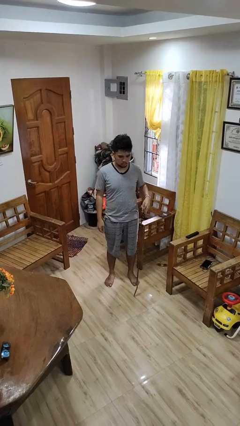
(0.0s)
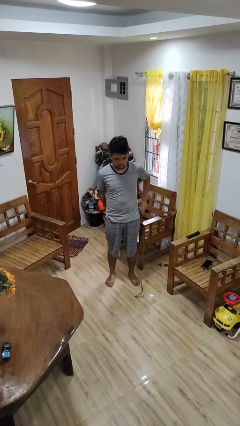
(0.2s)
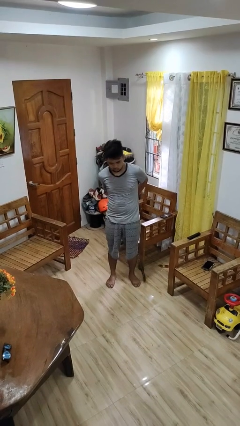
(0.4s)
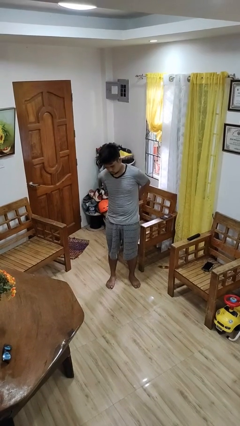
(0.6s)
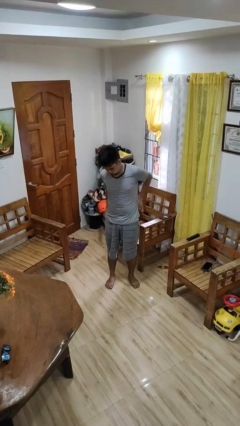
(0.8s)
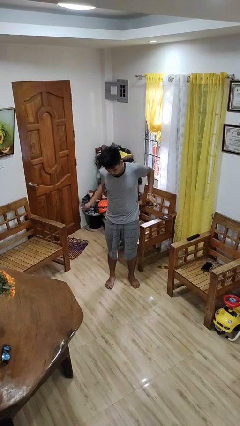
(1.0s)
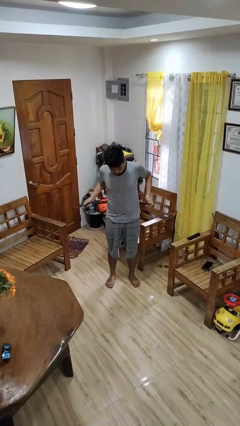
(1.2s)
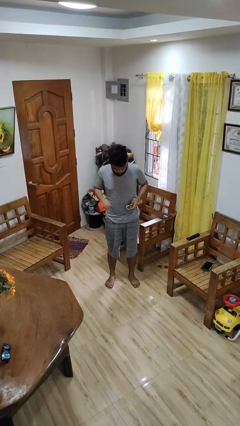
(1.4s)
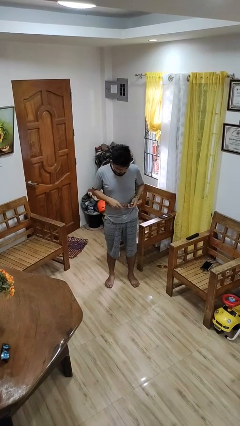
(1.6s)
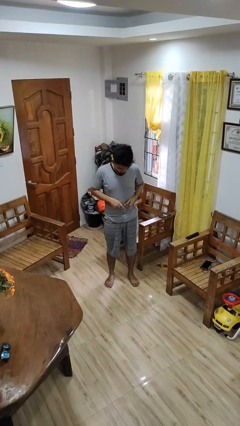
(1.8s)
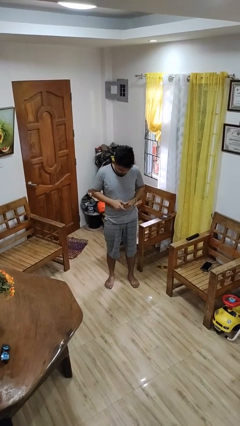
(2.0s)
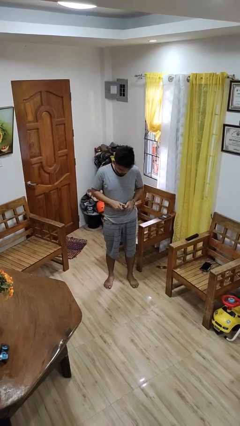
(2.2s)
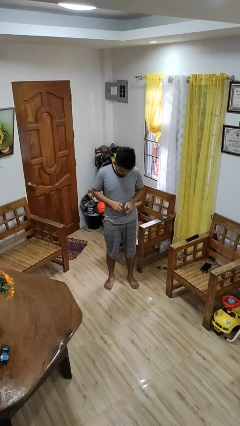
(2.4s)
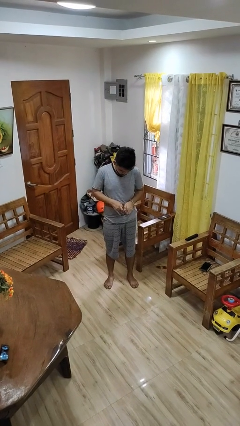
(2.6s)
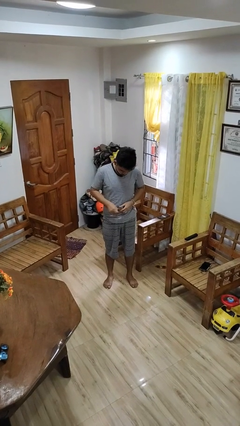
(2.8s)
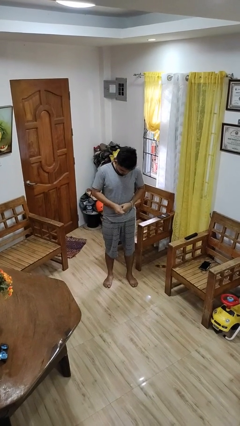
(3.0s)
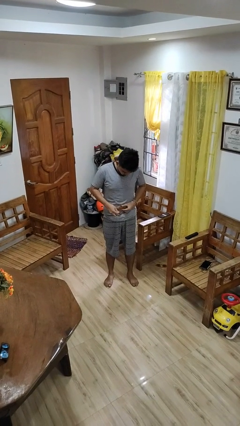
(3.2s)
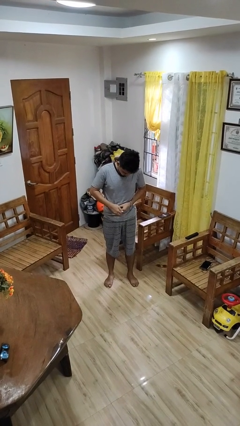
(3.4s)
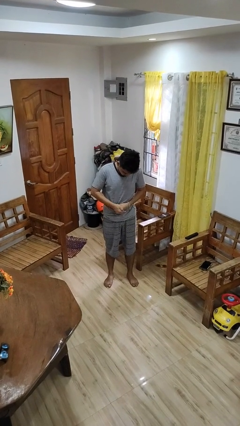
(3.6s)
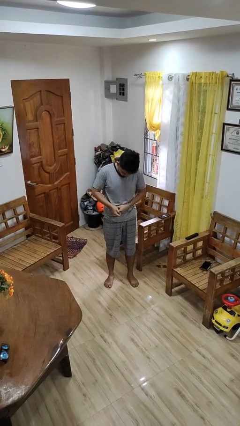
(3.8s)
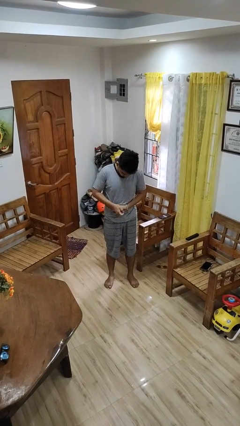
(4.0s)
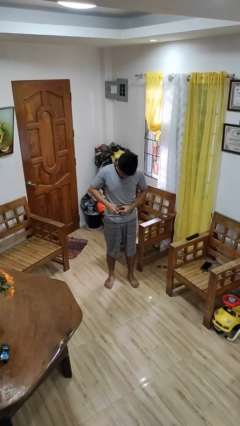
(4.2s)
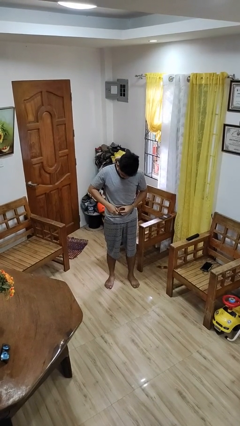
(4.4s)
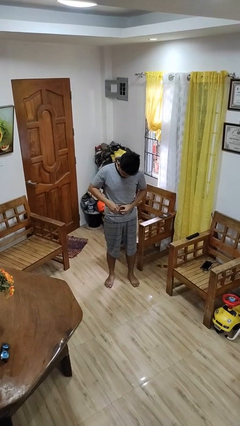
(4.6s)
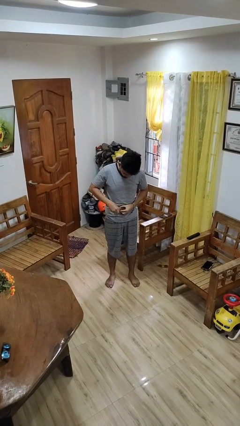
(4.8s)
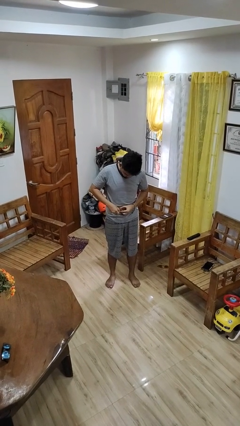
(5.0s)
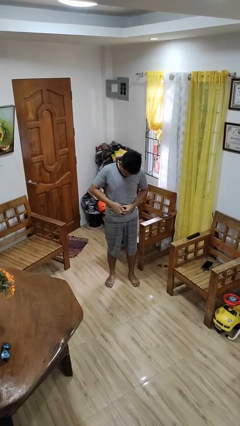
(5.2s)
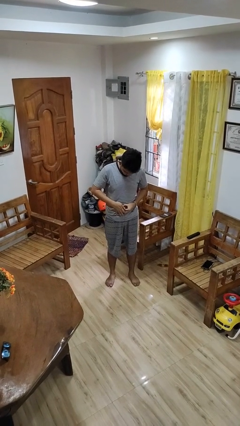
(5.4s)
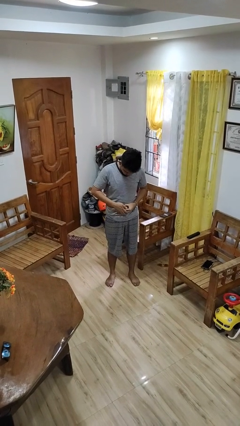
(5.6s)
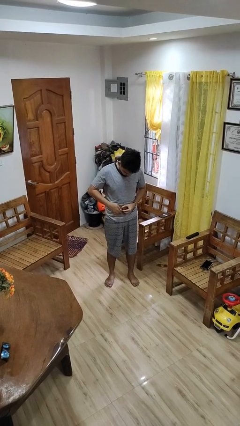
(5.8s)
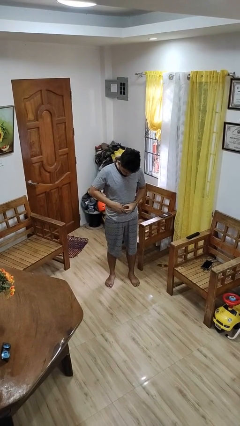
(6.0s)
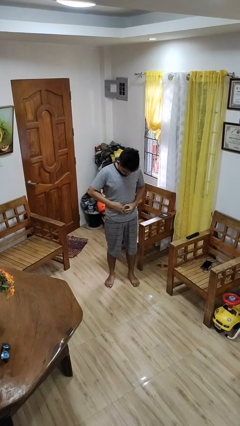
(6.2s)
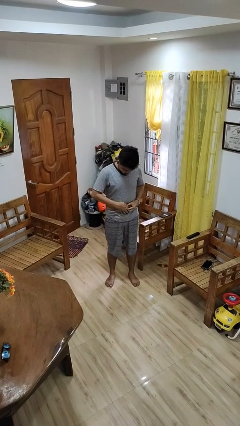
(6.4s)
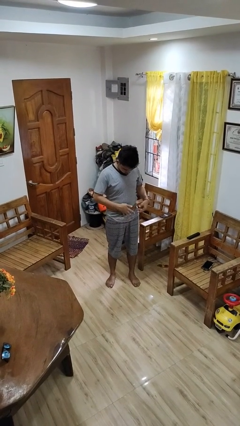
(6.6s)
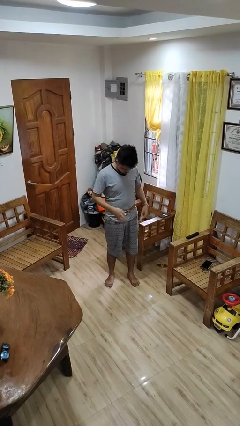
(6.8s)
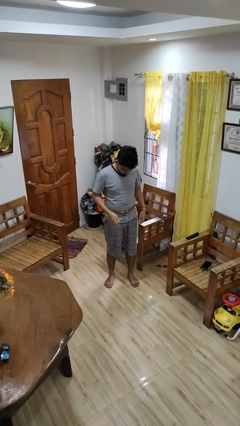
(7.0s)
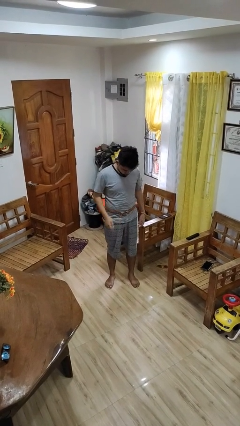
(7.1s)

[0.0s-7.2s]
person puts on belt

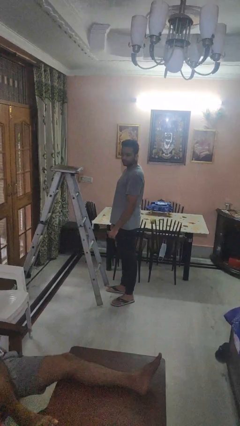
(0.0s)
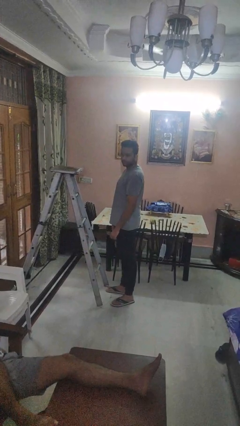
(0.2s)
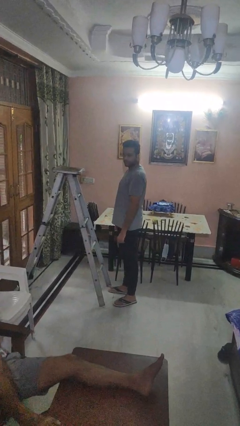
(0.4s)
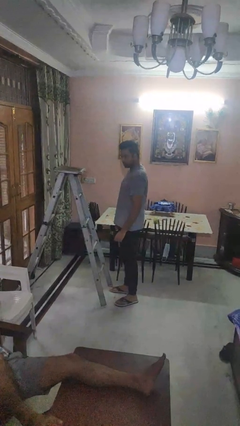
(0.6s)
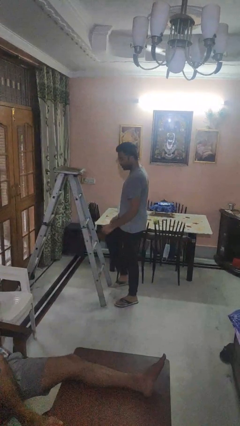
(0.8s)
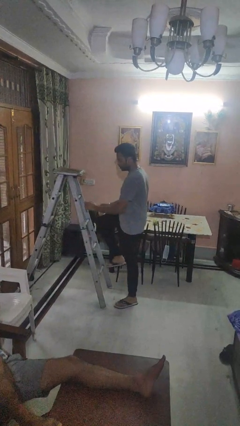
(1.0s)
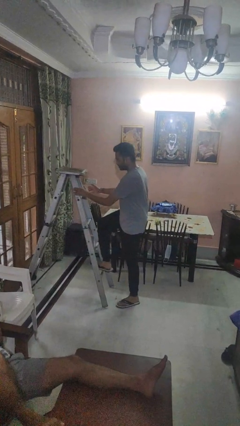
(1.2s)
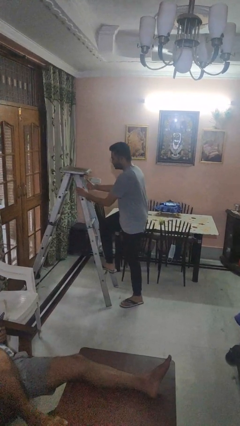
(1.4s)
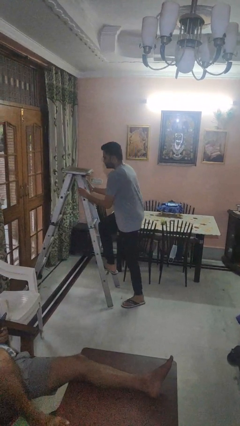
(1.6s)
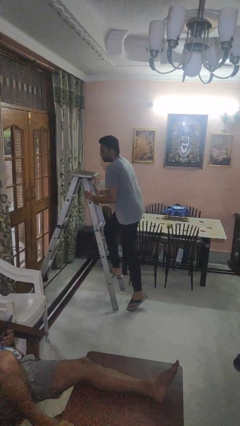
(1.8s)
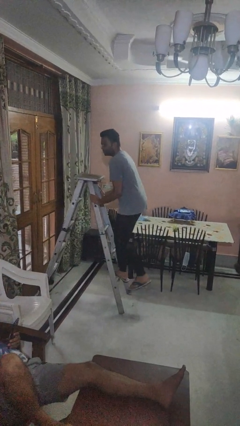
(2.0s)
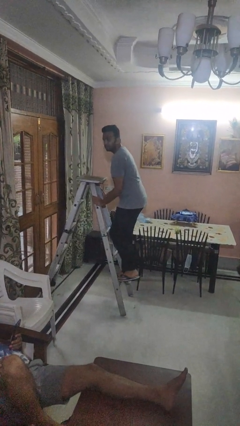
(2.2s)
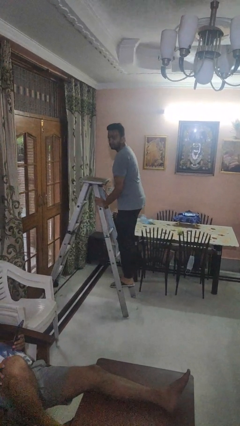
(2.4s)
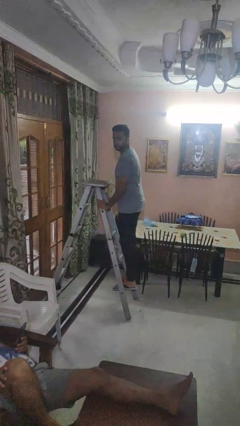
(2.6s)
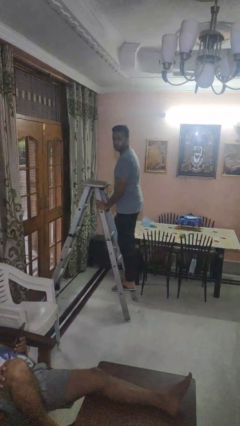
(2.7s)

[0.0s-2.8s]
person climbs up ladder

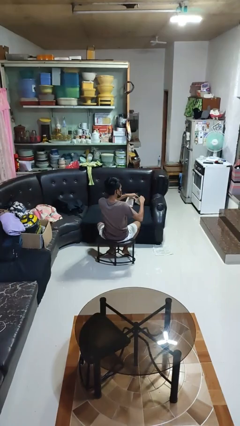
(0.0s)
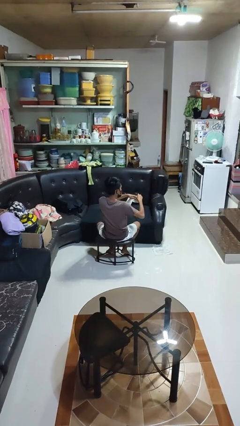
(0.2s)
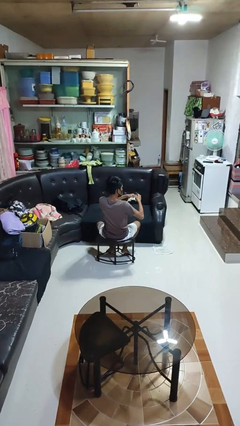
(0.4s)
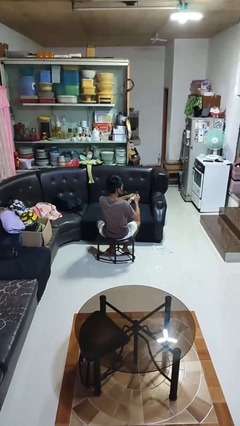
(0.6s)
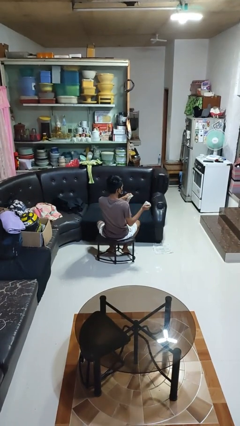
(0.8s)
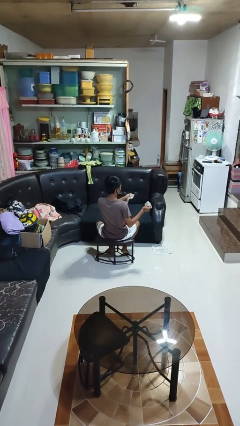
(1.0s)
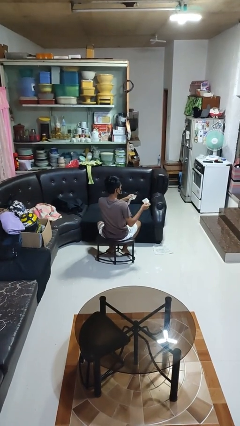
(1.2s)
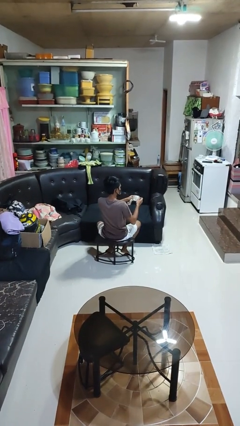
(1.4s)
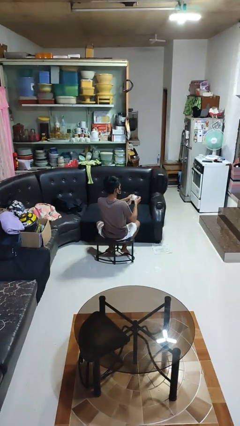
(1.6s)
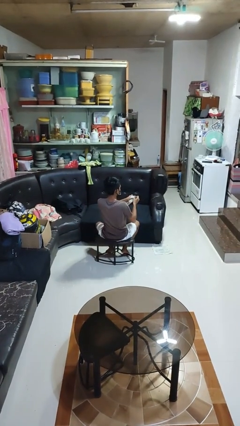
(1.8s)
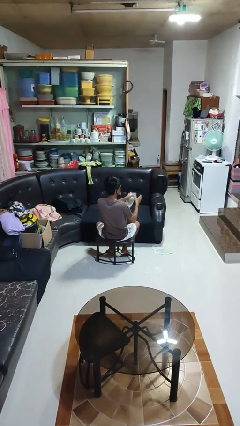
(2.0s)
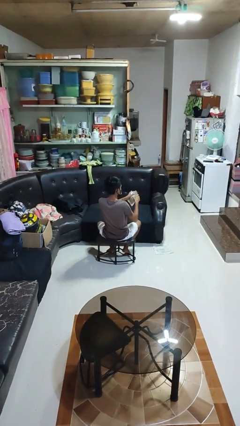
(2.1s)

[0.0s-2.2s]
person tears paper

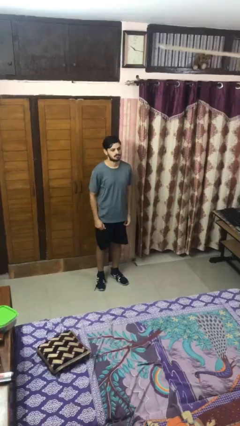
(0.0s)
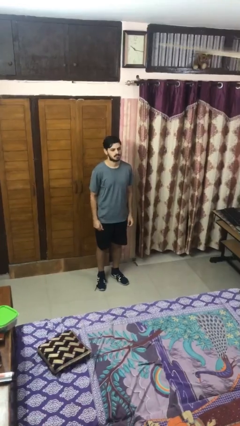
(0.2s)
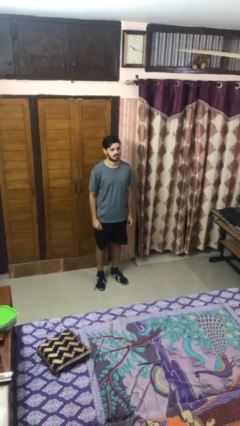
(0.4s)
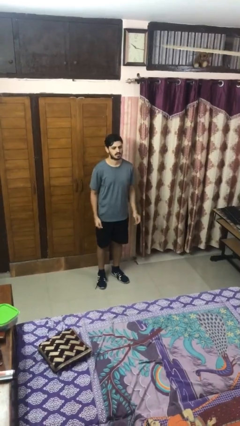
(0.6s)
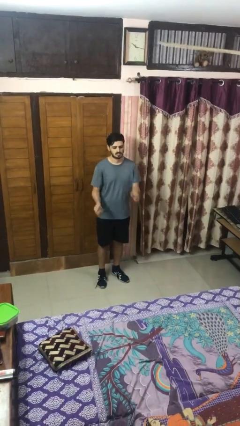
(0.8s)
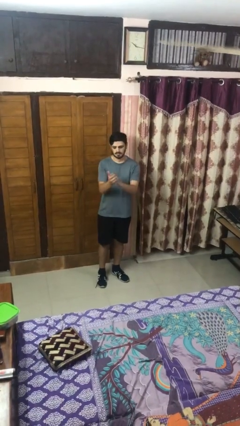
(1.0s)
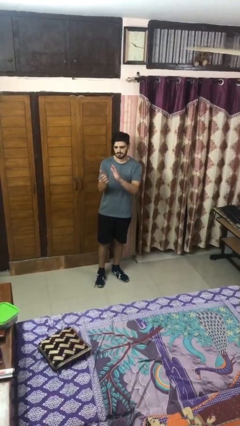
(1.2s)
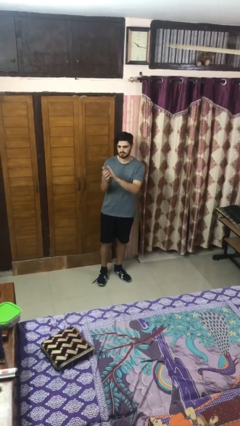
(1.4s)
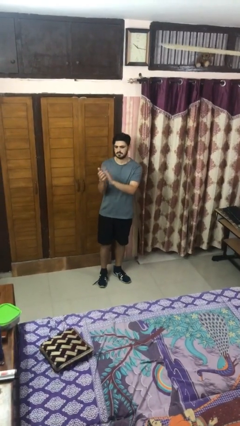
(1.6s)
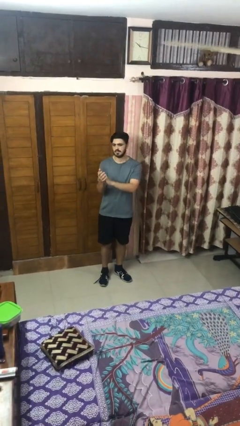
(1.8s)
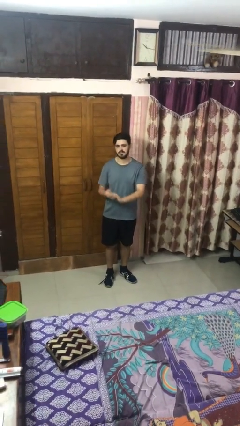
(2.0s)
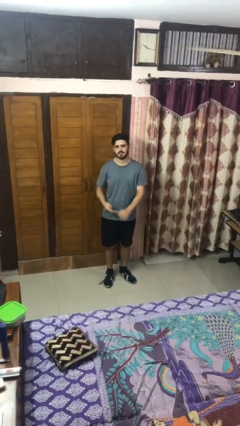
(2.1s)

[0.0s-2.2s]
person claps hands

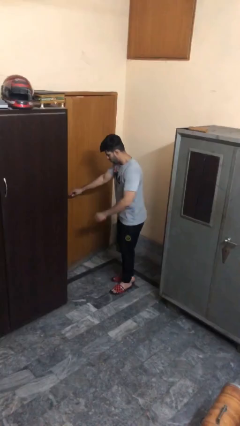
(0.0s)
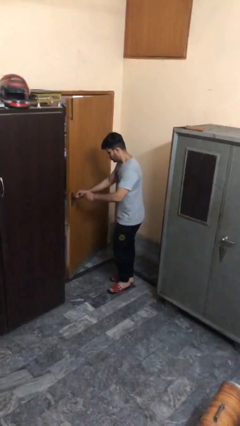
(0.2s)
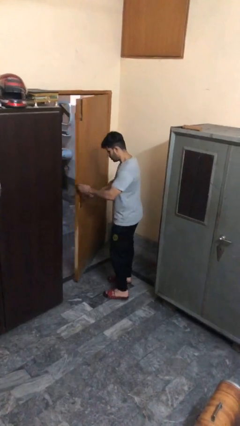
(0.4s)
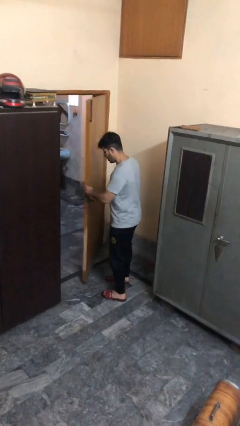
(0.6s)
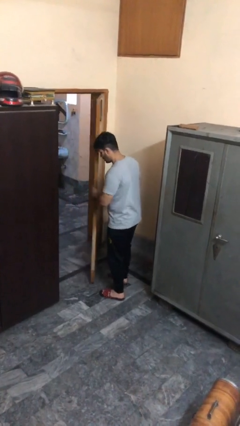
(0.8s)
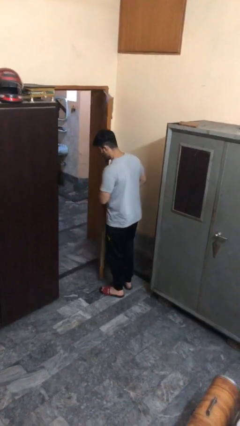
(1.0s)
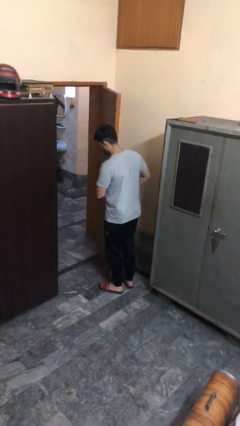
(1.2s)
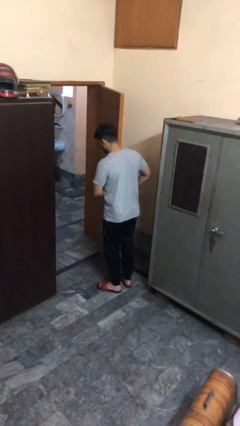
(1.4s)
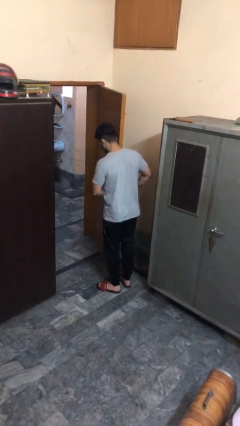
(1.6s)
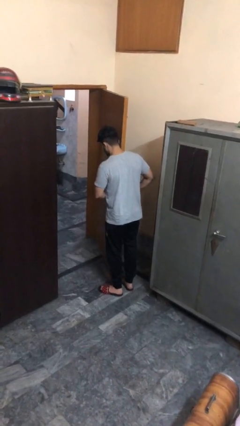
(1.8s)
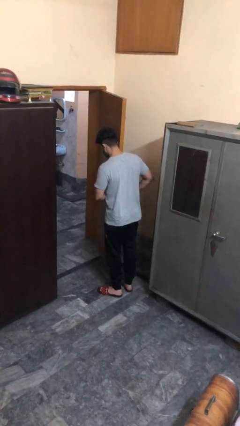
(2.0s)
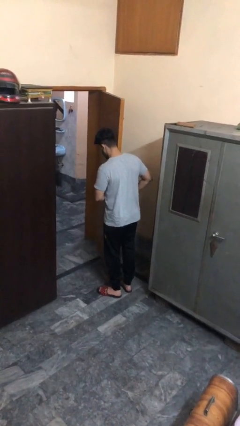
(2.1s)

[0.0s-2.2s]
person opens facility door

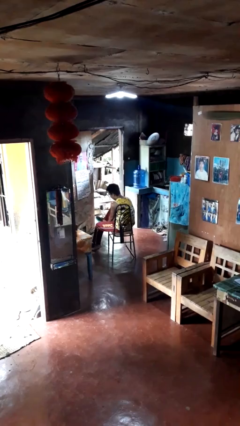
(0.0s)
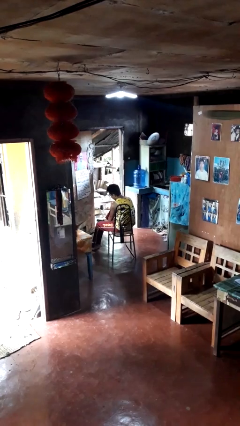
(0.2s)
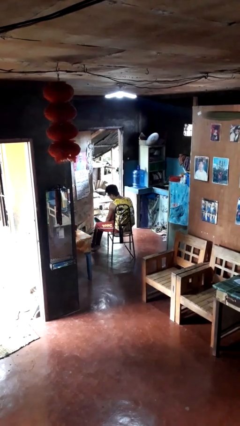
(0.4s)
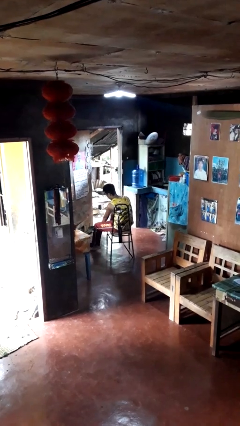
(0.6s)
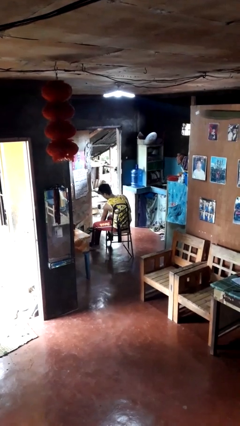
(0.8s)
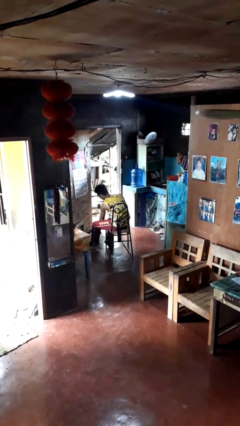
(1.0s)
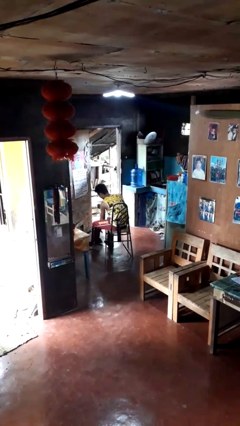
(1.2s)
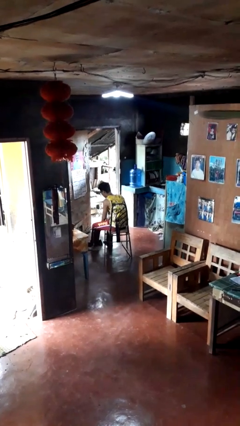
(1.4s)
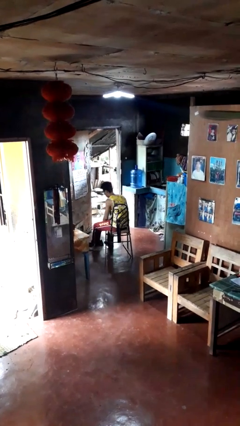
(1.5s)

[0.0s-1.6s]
person takes off shoes
